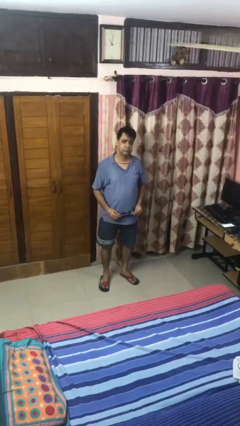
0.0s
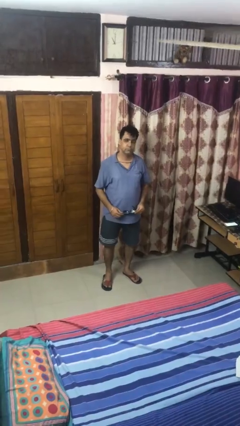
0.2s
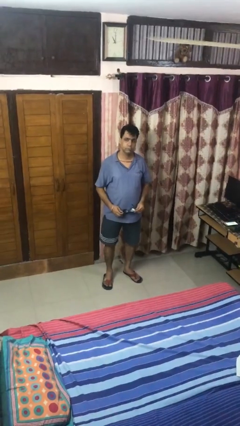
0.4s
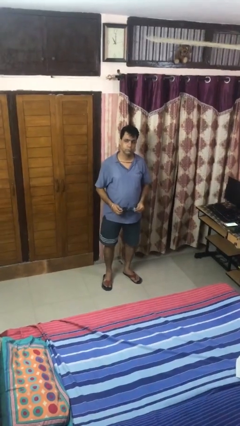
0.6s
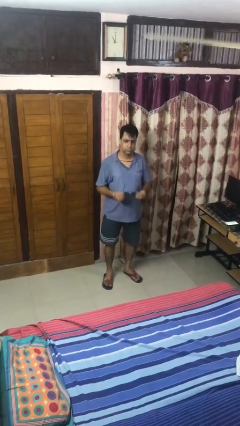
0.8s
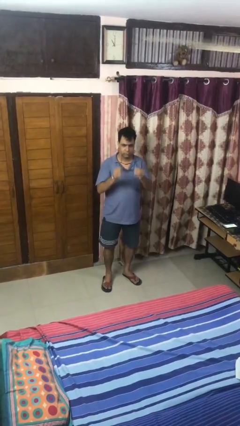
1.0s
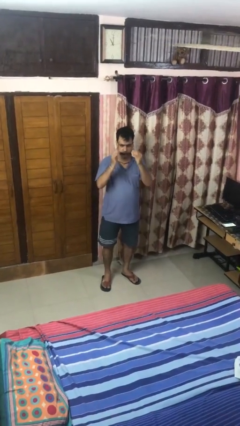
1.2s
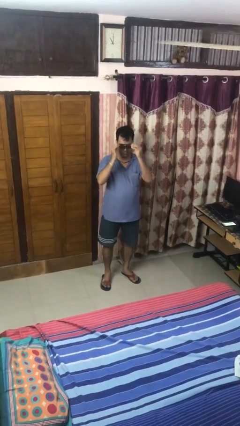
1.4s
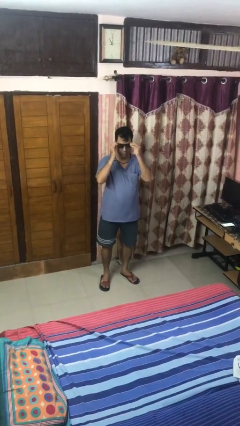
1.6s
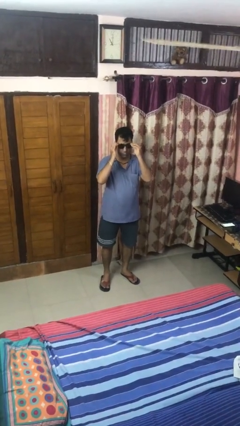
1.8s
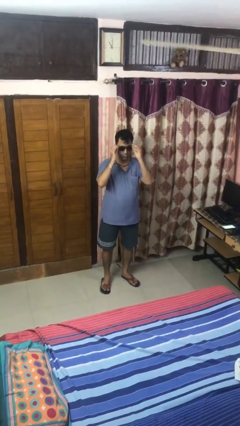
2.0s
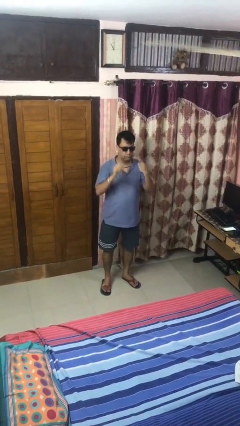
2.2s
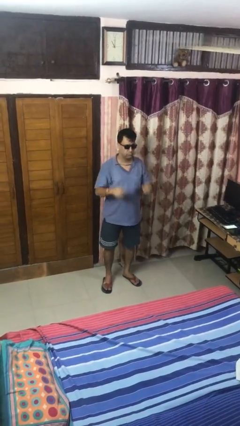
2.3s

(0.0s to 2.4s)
person puts on sunglasses

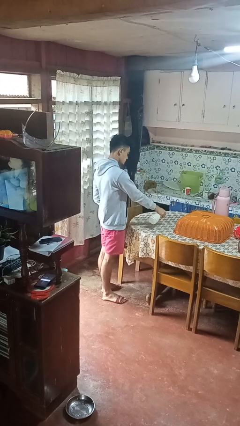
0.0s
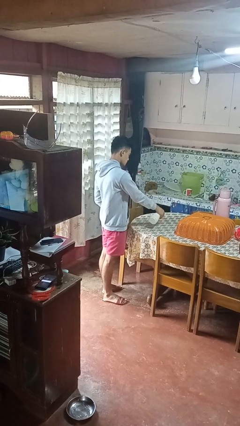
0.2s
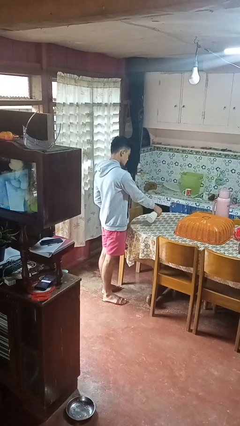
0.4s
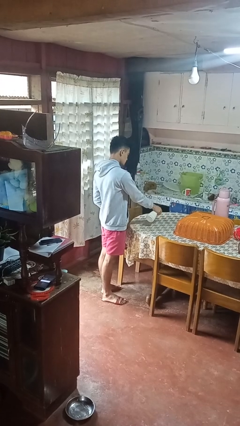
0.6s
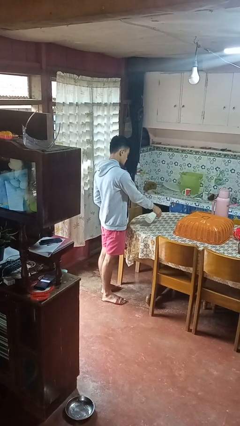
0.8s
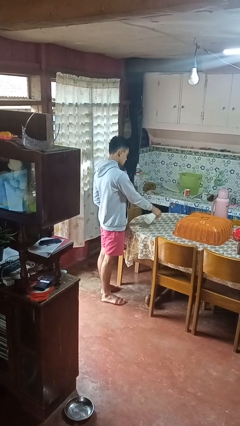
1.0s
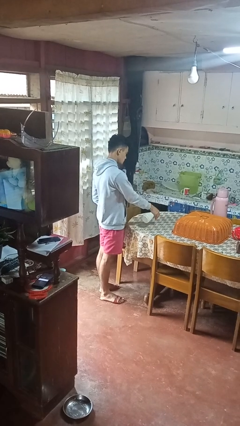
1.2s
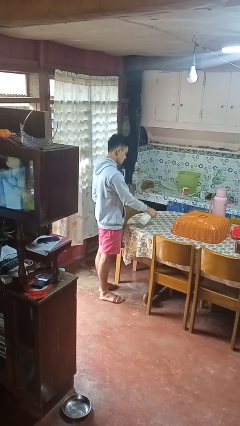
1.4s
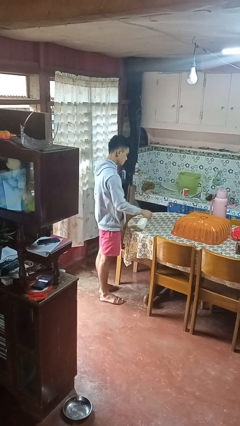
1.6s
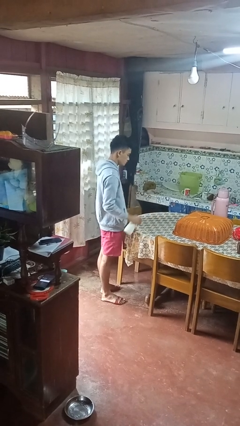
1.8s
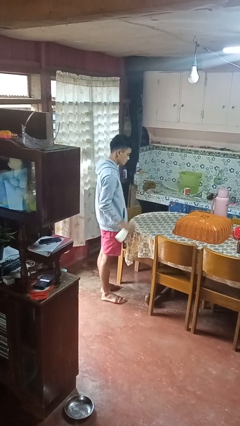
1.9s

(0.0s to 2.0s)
person sprays from bottle

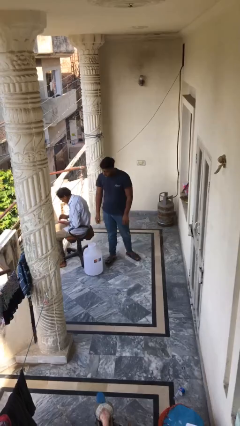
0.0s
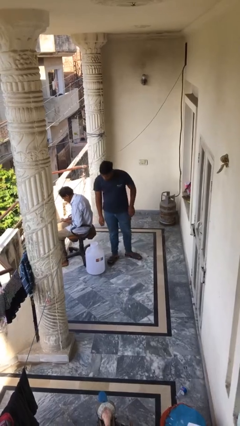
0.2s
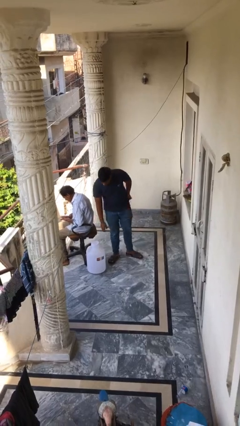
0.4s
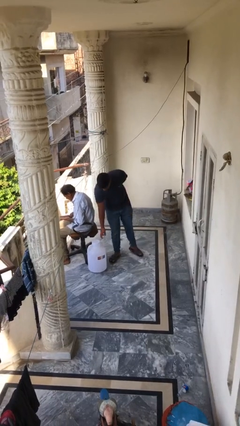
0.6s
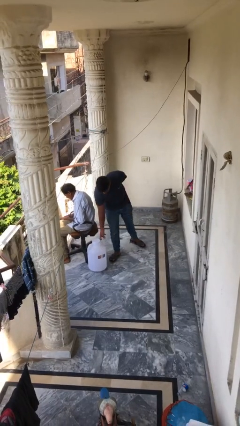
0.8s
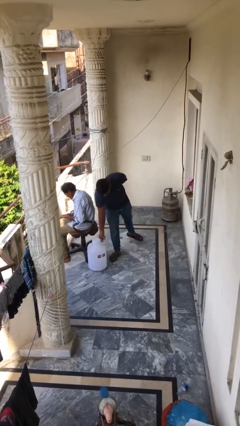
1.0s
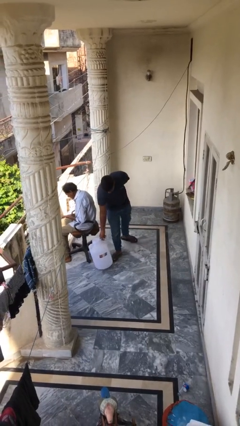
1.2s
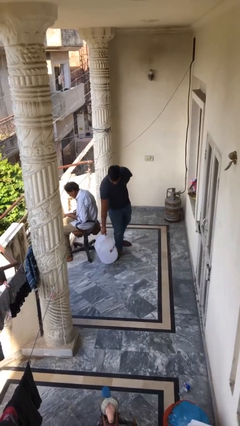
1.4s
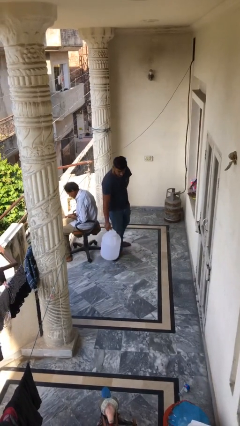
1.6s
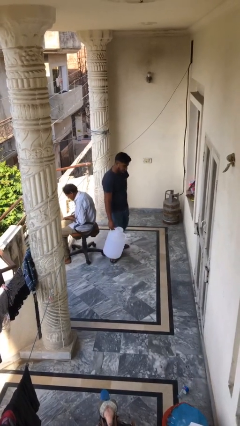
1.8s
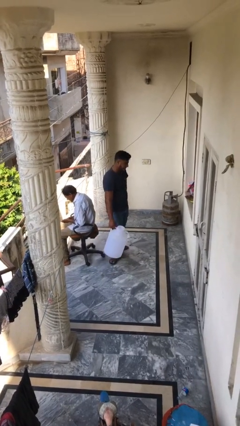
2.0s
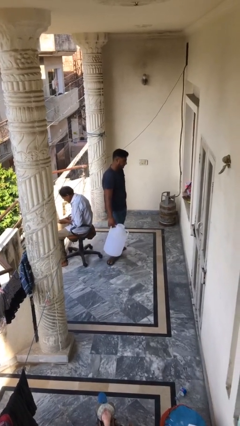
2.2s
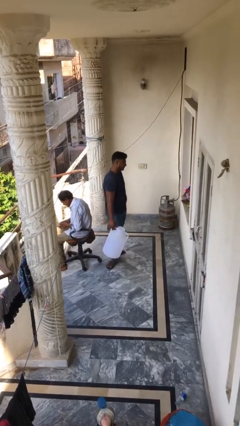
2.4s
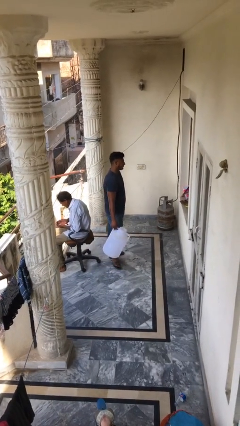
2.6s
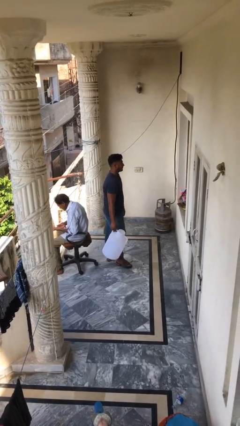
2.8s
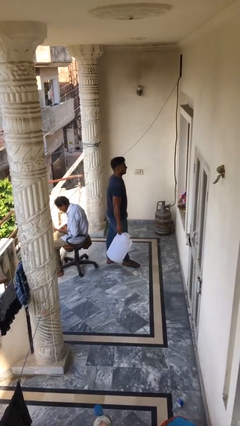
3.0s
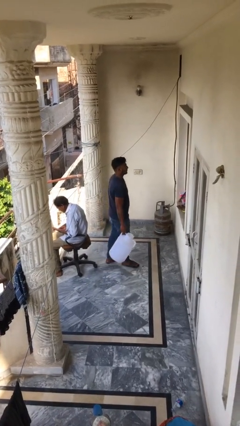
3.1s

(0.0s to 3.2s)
person steals object from person

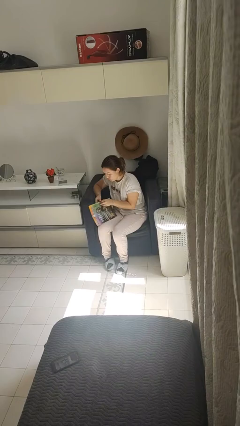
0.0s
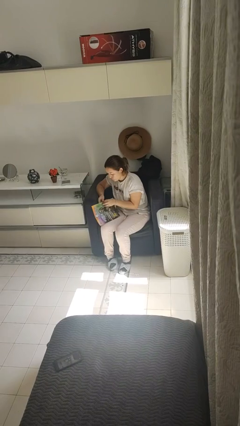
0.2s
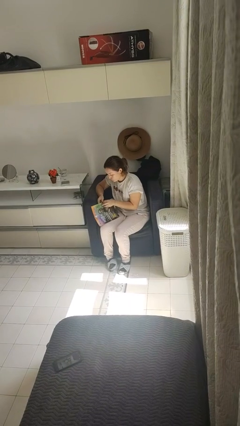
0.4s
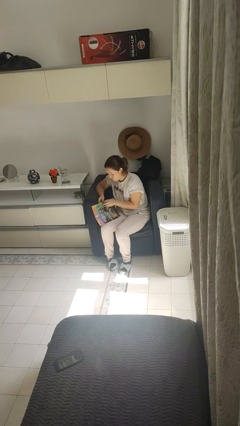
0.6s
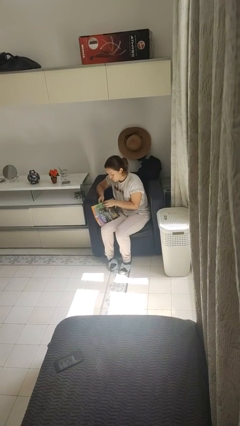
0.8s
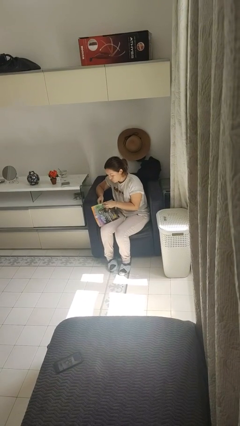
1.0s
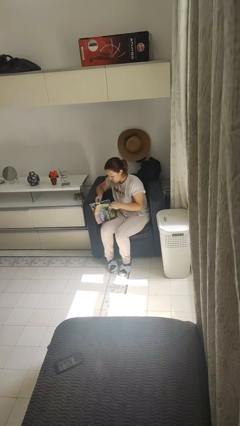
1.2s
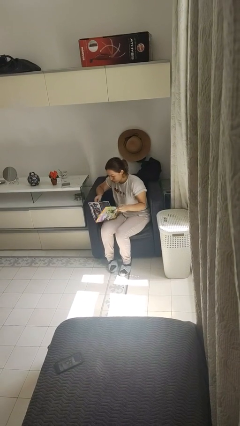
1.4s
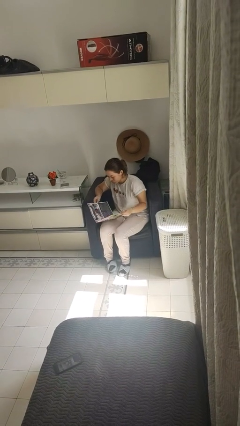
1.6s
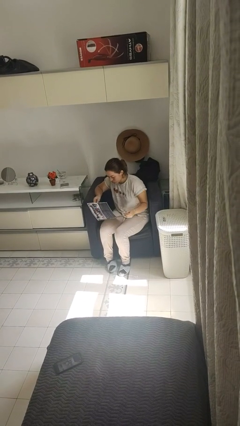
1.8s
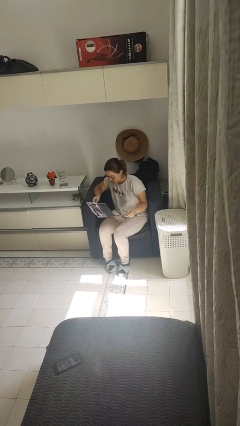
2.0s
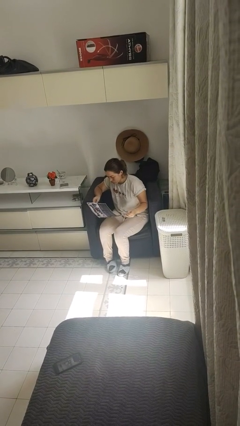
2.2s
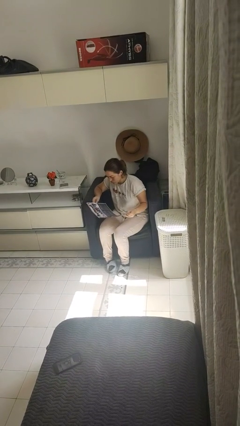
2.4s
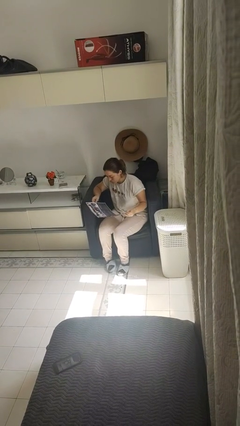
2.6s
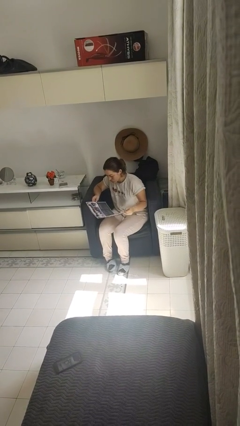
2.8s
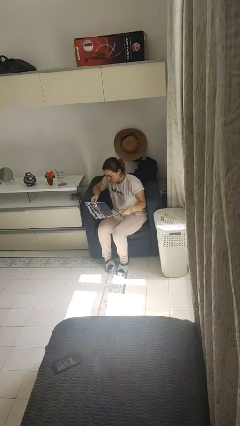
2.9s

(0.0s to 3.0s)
person reads newspaper

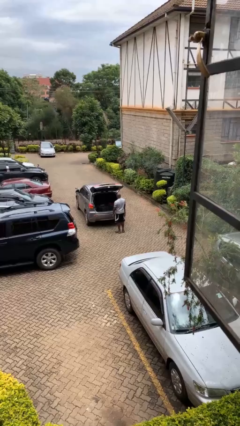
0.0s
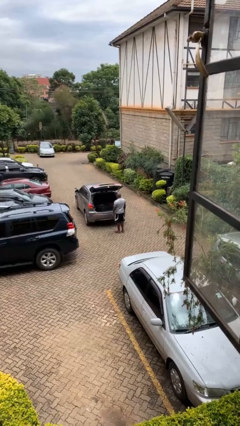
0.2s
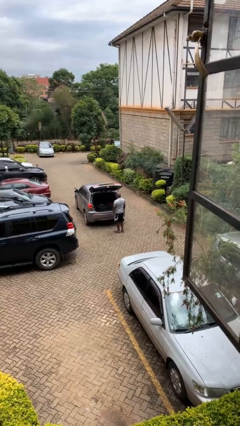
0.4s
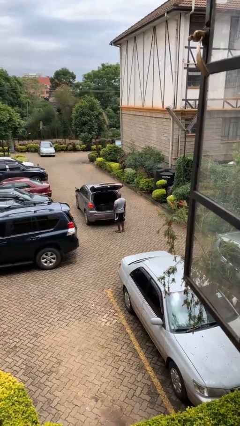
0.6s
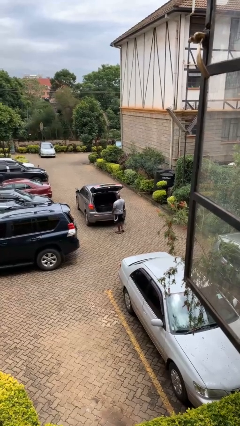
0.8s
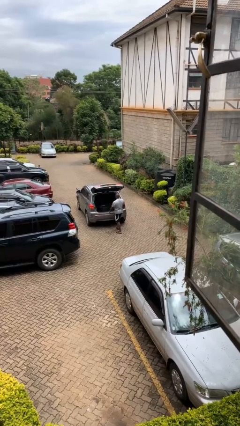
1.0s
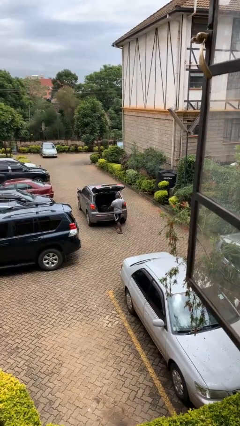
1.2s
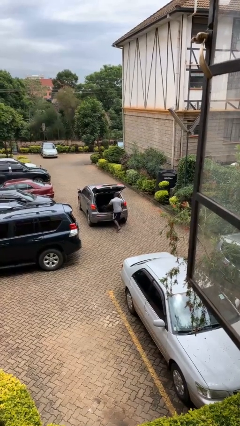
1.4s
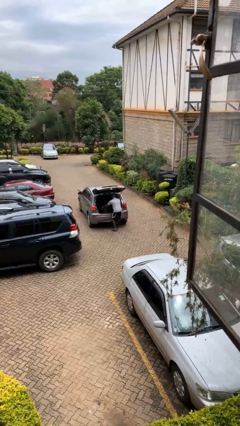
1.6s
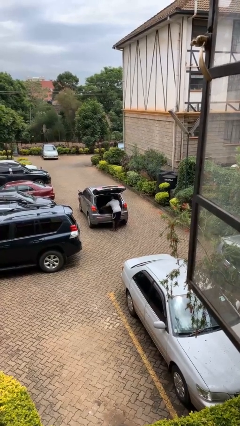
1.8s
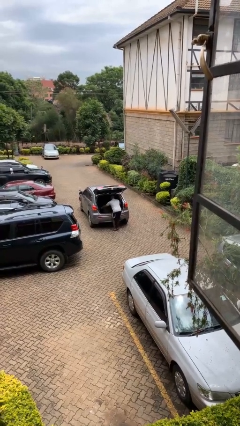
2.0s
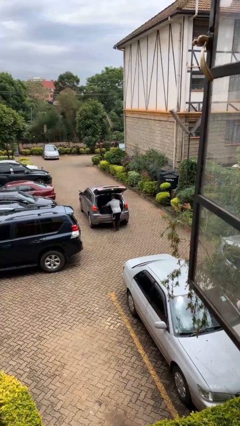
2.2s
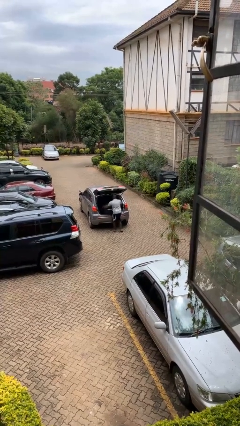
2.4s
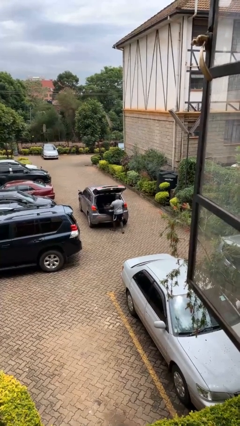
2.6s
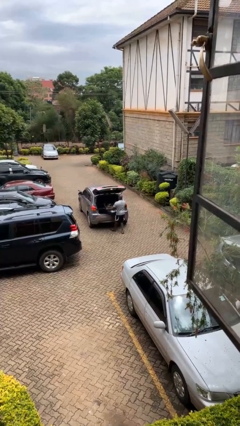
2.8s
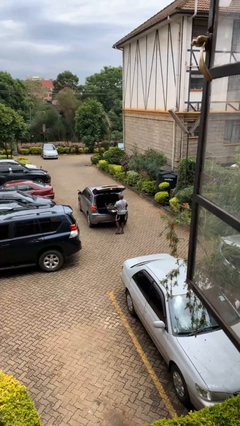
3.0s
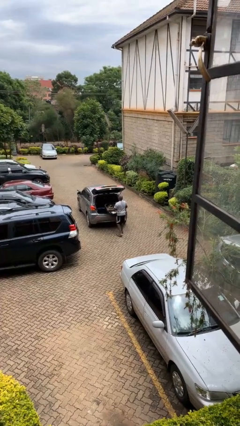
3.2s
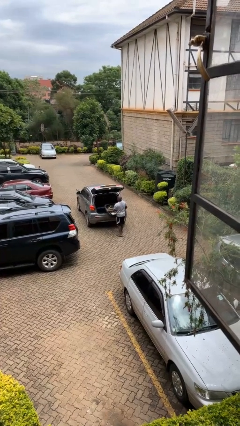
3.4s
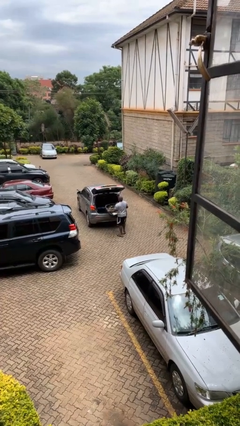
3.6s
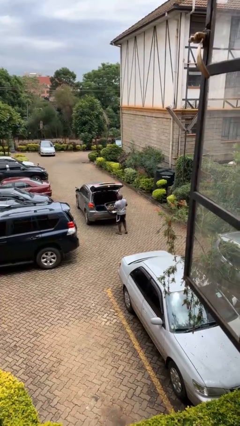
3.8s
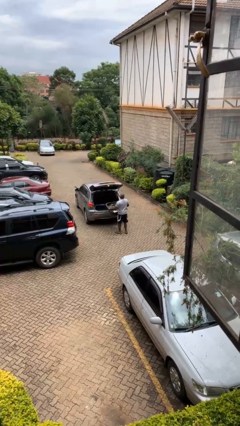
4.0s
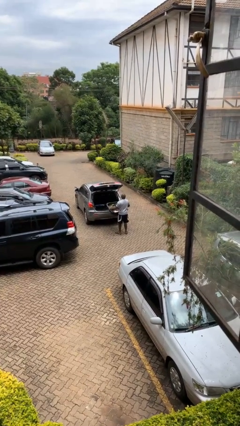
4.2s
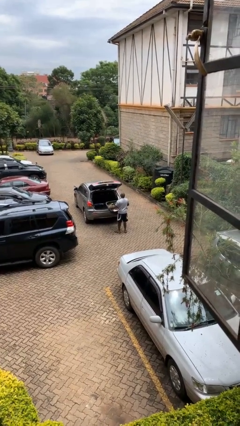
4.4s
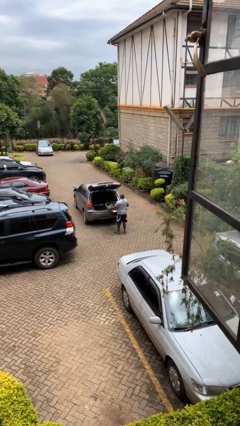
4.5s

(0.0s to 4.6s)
person unloads car

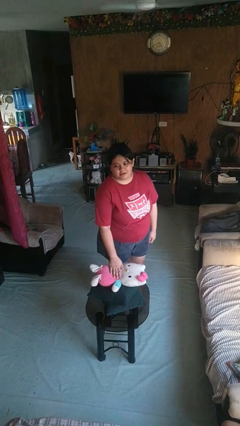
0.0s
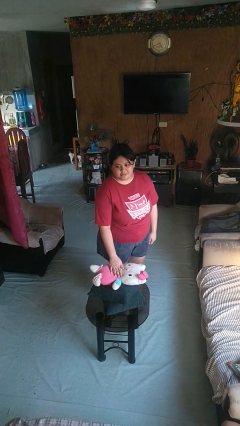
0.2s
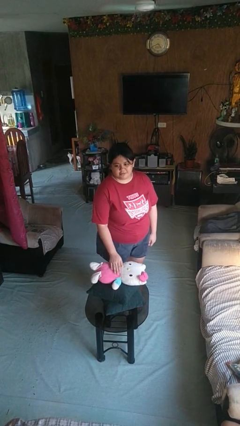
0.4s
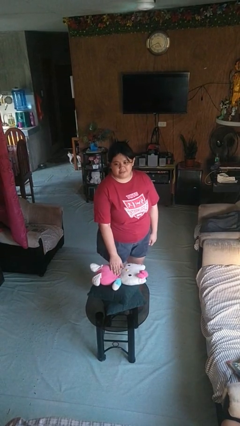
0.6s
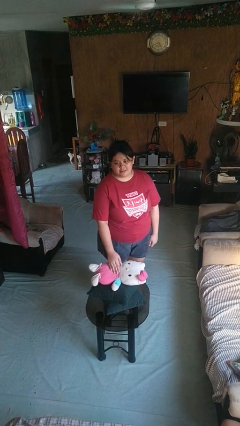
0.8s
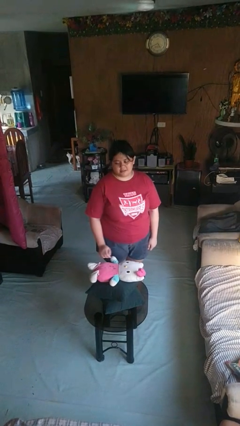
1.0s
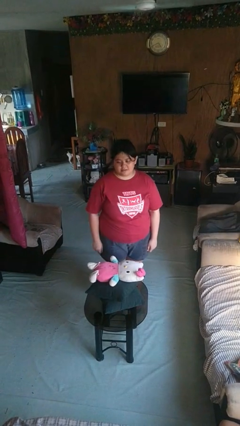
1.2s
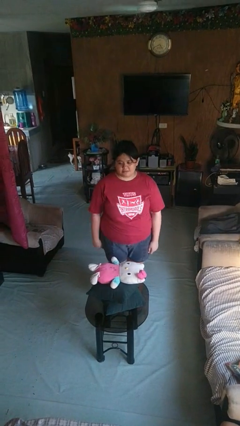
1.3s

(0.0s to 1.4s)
person taps object with finger

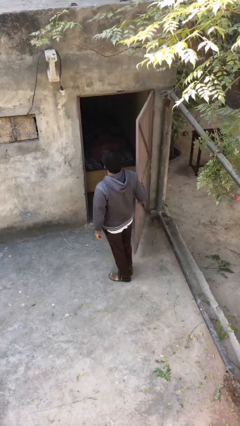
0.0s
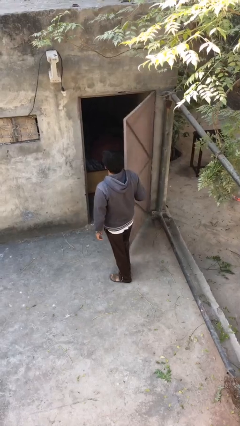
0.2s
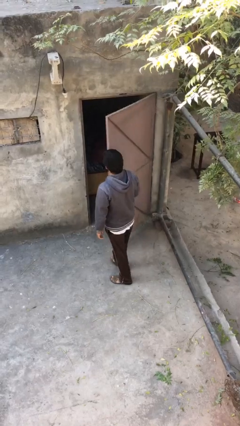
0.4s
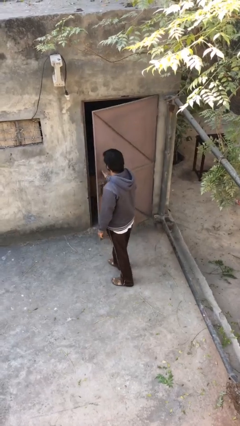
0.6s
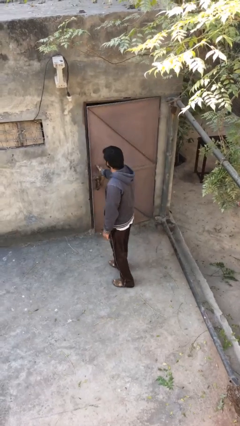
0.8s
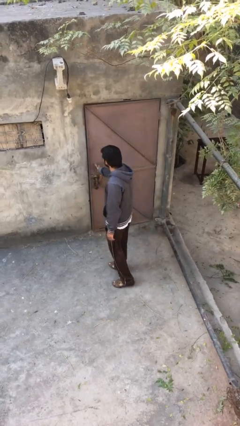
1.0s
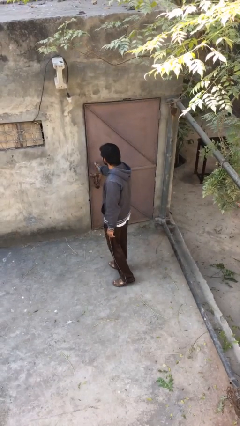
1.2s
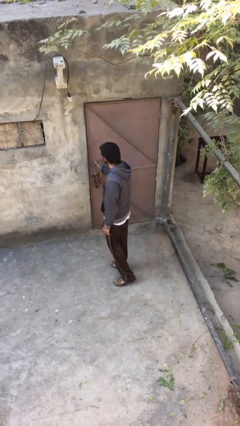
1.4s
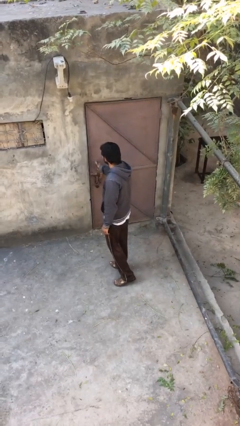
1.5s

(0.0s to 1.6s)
person closes facility door
